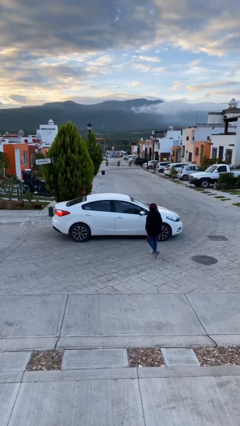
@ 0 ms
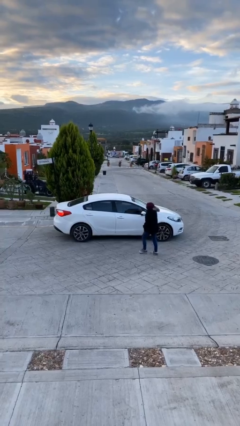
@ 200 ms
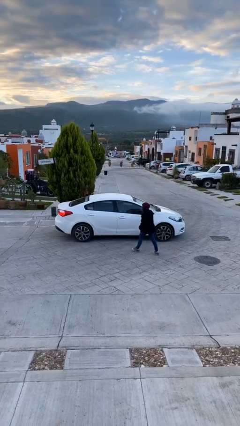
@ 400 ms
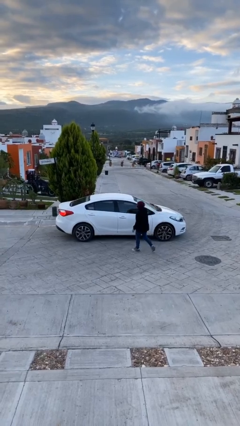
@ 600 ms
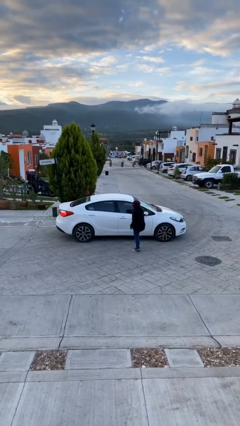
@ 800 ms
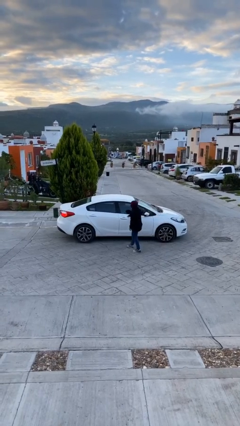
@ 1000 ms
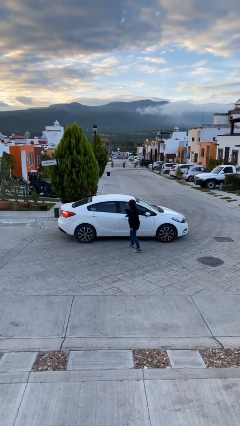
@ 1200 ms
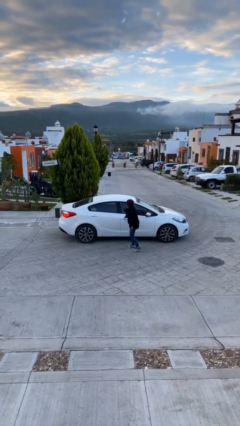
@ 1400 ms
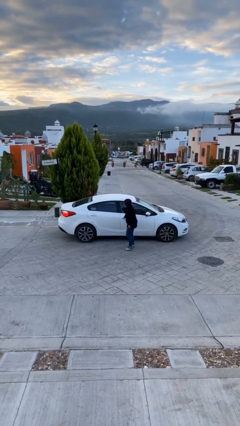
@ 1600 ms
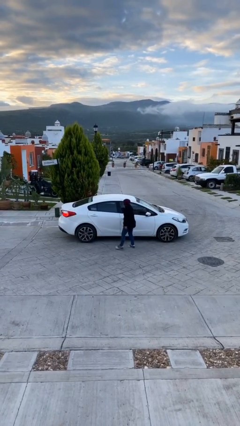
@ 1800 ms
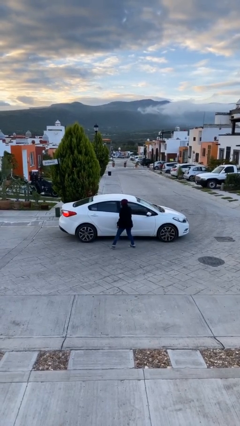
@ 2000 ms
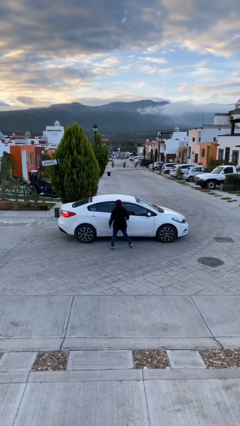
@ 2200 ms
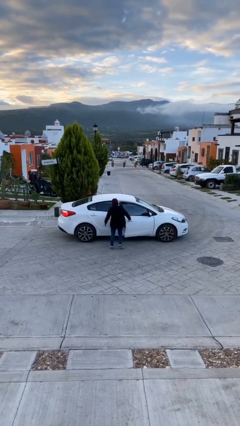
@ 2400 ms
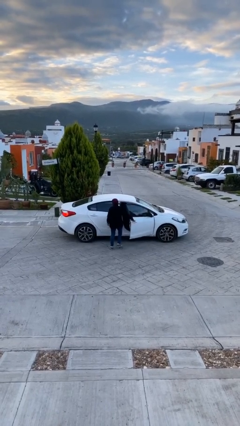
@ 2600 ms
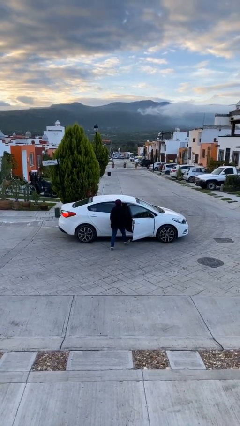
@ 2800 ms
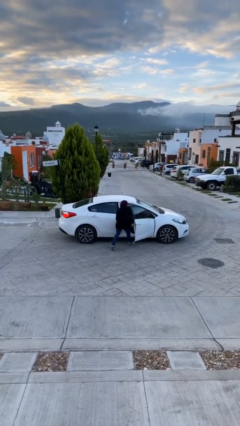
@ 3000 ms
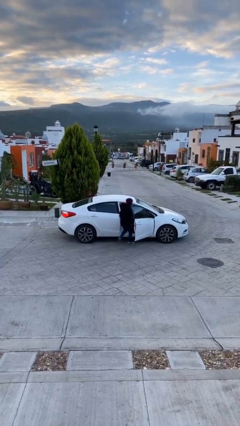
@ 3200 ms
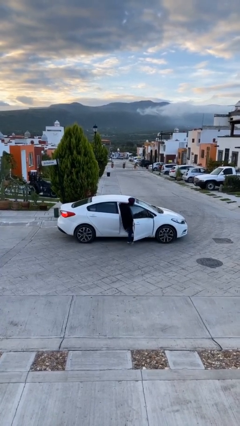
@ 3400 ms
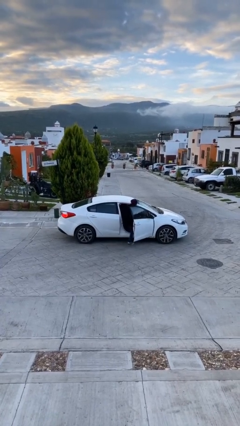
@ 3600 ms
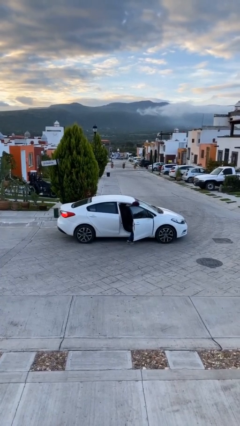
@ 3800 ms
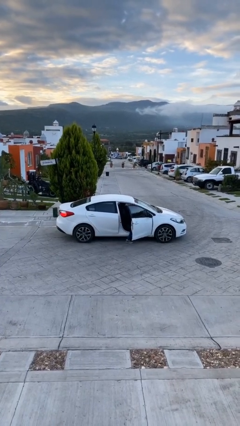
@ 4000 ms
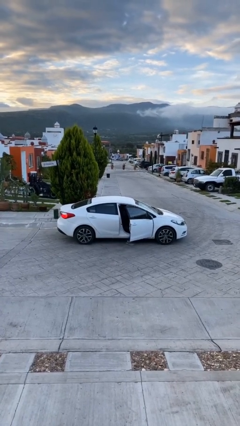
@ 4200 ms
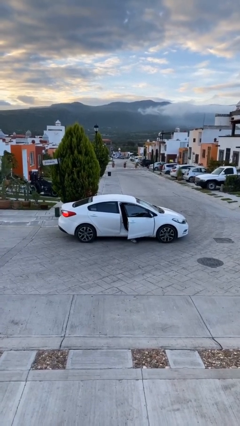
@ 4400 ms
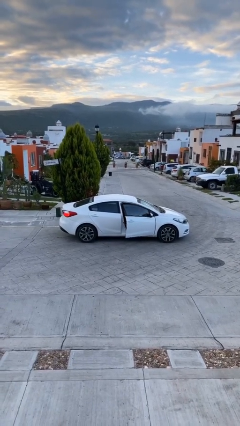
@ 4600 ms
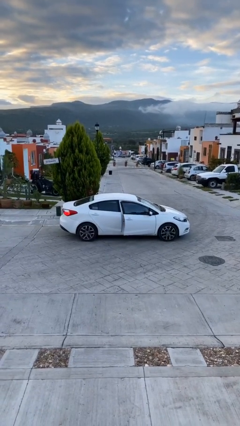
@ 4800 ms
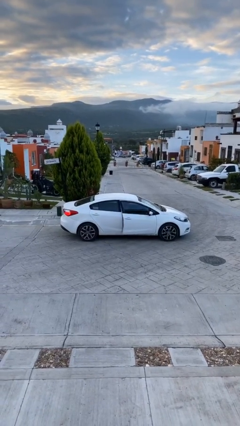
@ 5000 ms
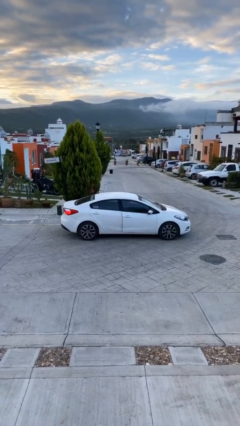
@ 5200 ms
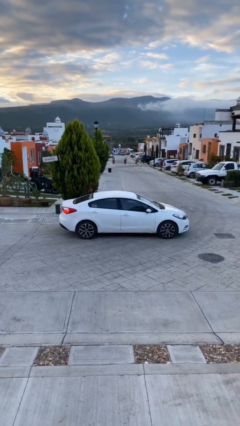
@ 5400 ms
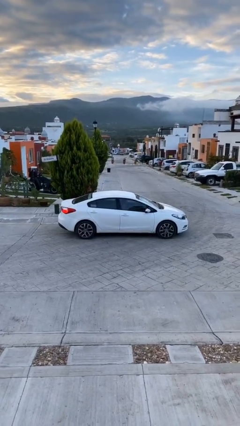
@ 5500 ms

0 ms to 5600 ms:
car picks up person

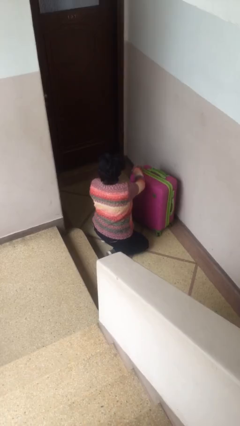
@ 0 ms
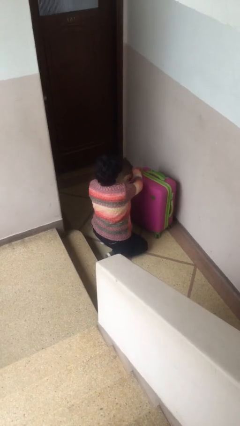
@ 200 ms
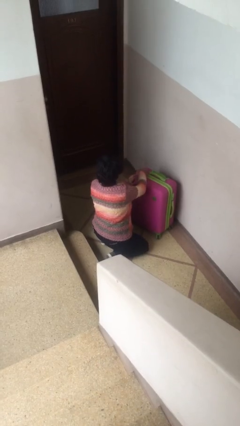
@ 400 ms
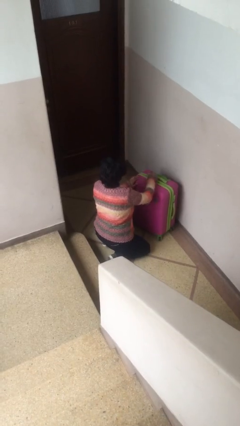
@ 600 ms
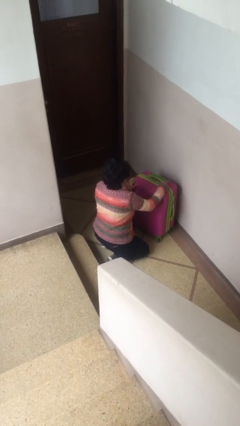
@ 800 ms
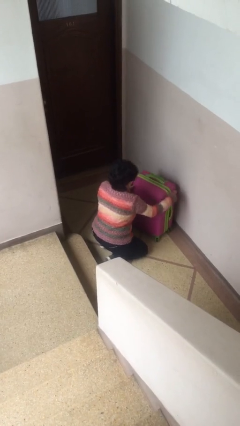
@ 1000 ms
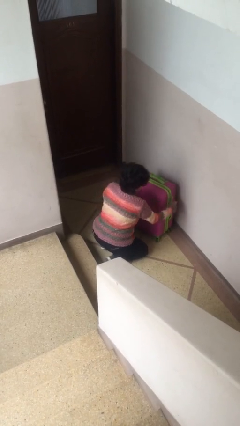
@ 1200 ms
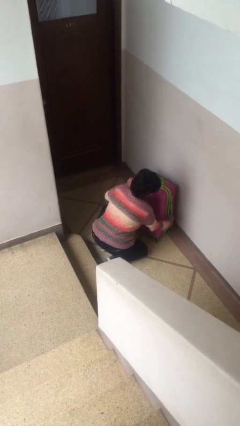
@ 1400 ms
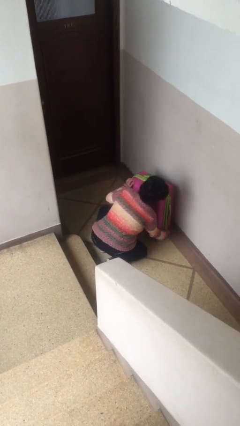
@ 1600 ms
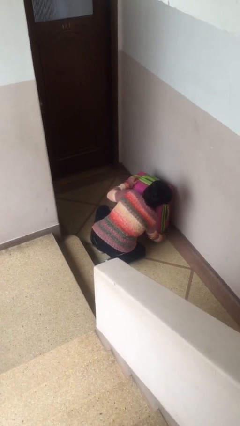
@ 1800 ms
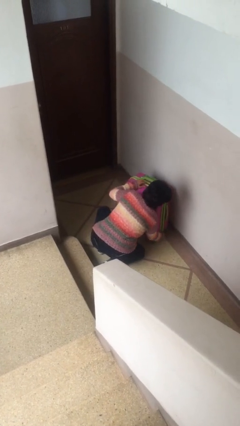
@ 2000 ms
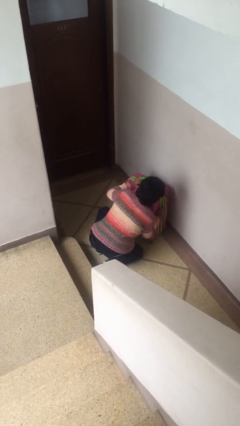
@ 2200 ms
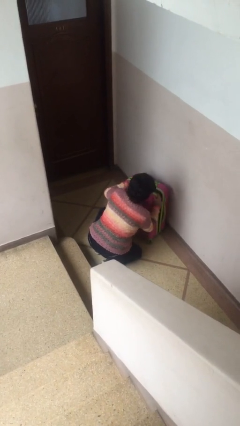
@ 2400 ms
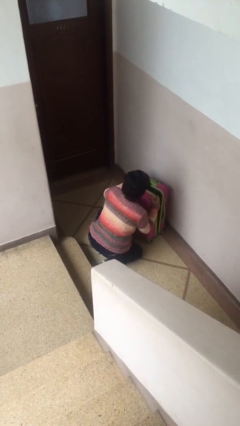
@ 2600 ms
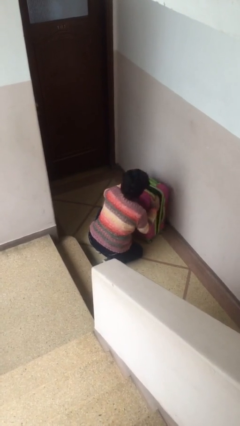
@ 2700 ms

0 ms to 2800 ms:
person opens suitcase

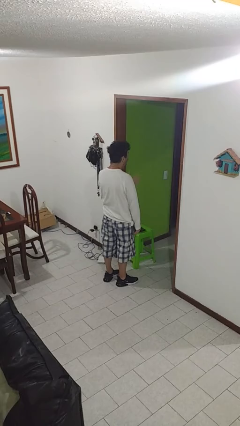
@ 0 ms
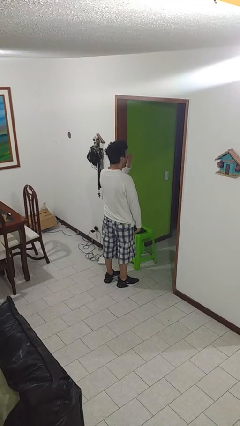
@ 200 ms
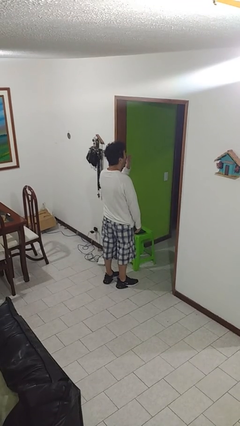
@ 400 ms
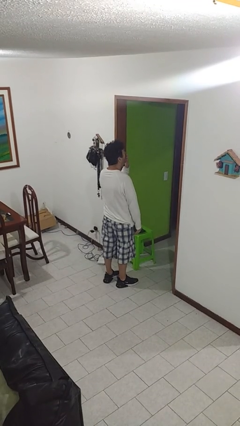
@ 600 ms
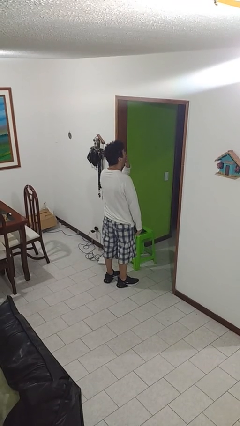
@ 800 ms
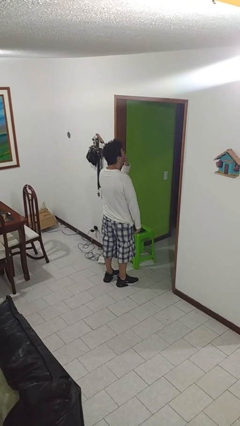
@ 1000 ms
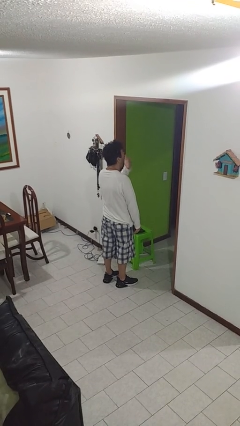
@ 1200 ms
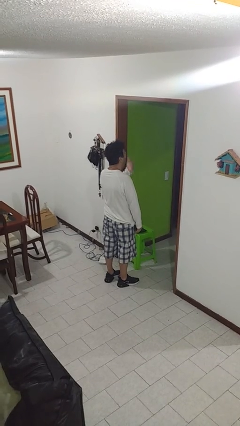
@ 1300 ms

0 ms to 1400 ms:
person yawns

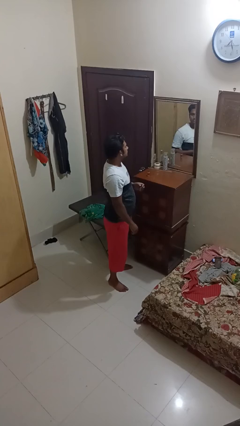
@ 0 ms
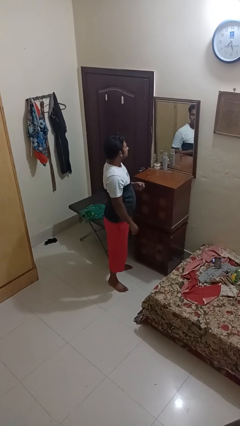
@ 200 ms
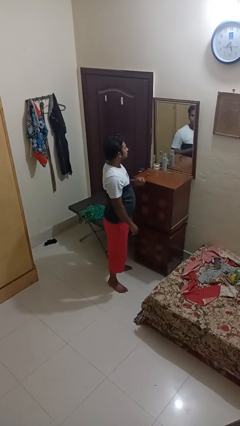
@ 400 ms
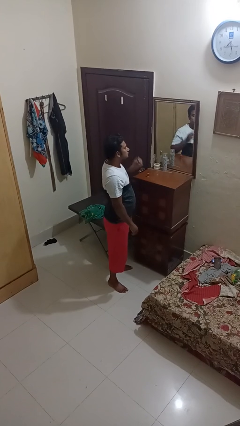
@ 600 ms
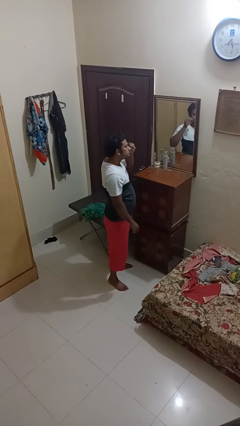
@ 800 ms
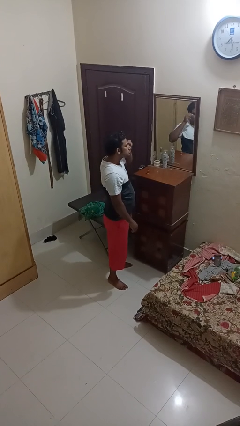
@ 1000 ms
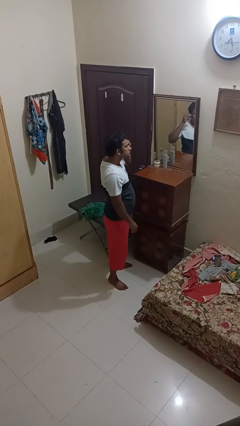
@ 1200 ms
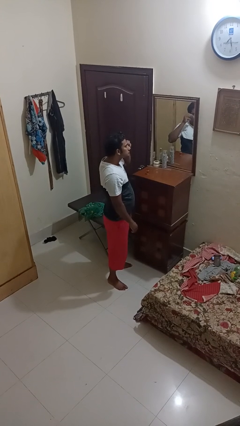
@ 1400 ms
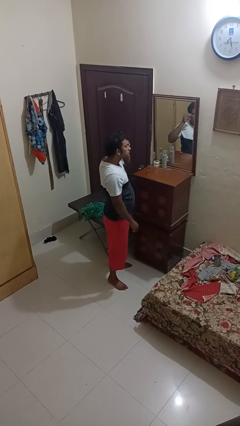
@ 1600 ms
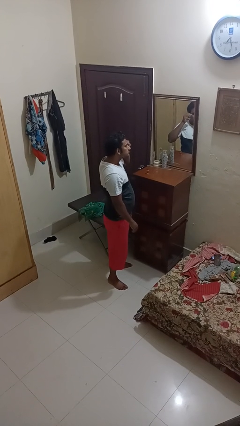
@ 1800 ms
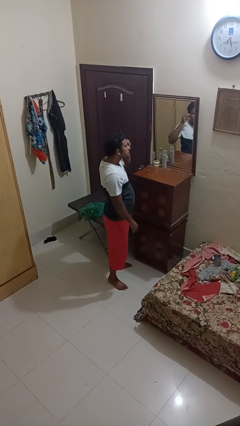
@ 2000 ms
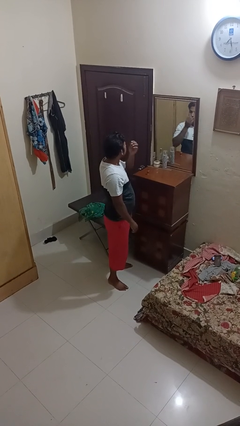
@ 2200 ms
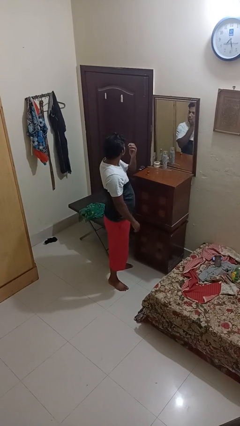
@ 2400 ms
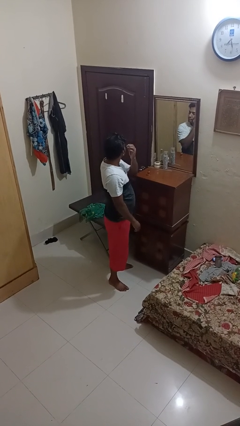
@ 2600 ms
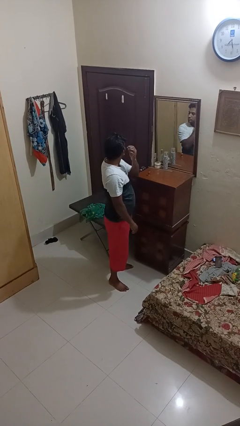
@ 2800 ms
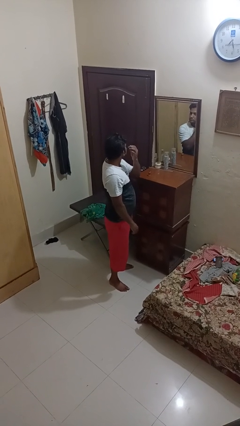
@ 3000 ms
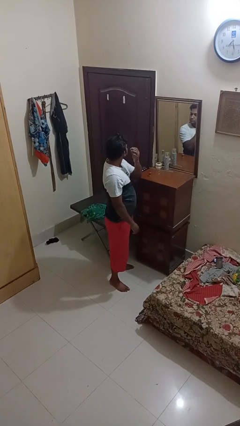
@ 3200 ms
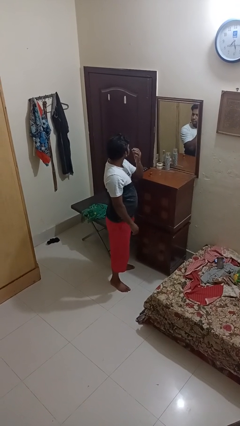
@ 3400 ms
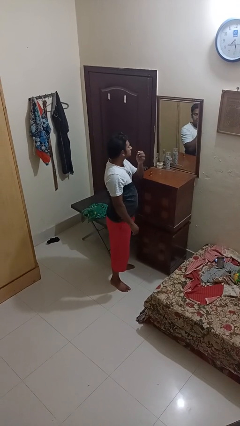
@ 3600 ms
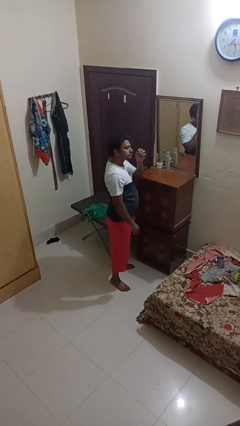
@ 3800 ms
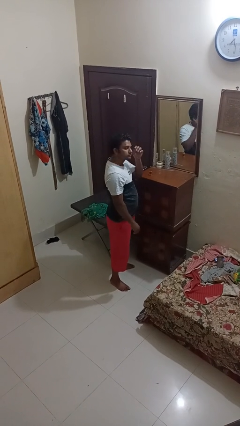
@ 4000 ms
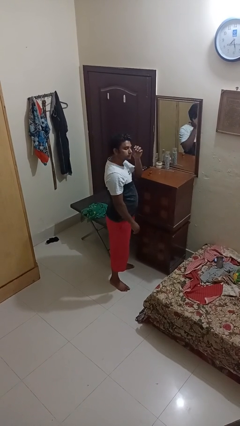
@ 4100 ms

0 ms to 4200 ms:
person applies eye makeup

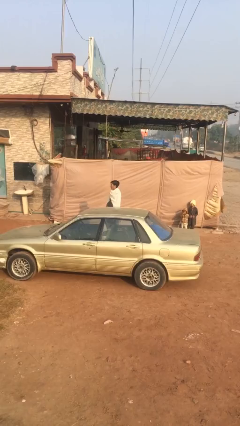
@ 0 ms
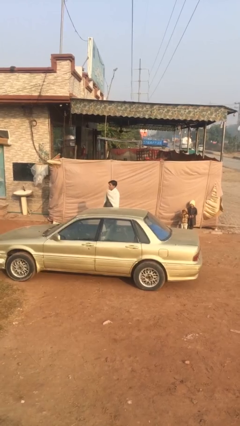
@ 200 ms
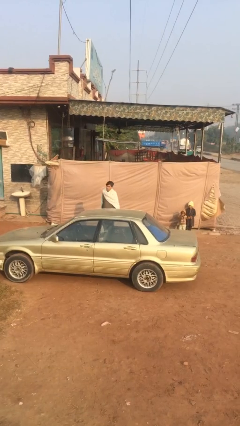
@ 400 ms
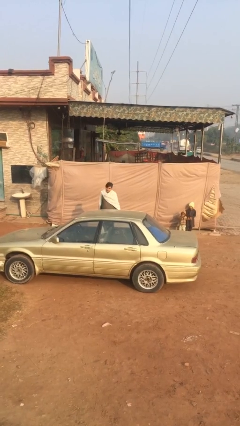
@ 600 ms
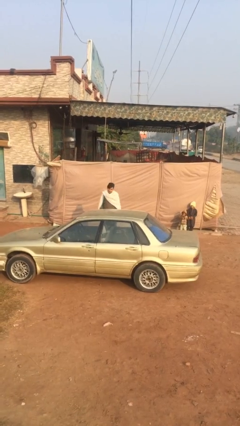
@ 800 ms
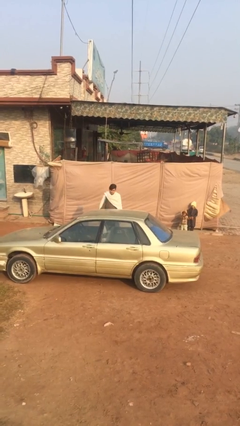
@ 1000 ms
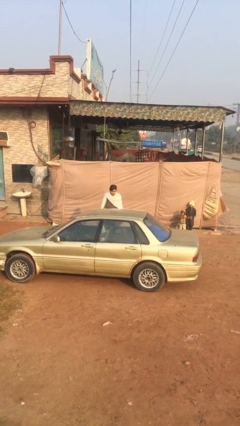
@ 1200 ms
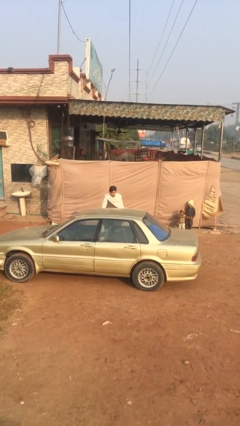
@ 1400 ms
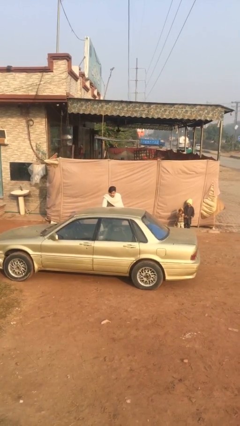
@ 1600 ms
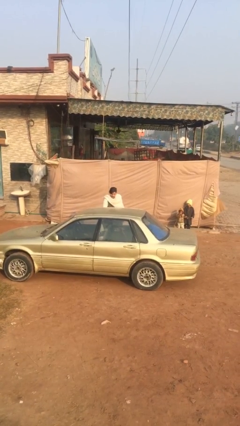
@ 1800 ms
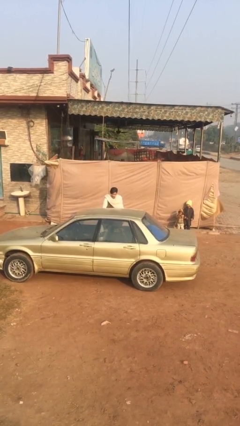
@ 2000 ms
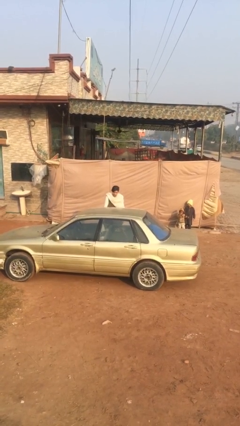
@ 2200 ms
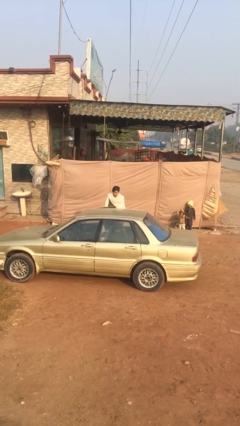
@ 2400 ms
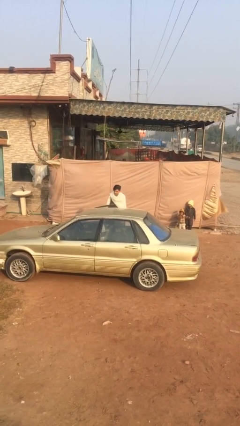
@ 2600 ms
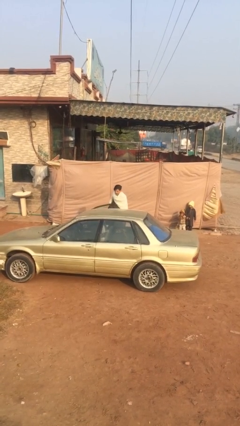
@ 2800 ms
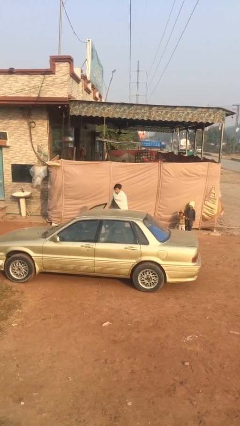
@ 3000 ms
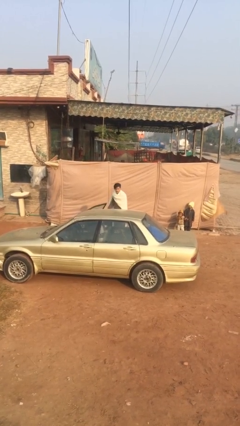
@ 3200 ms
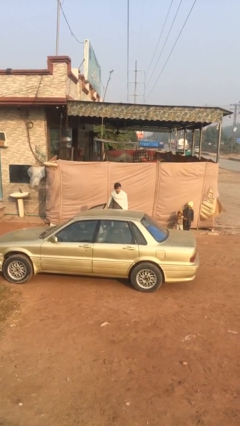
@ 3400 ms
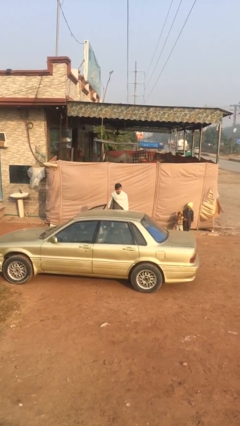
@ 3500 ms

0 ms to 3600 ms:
person opens car door
